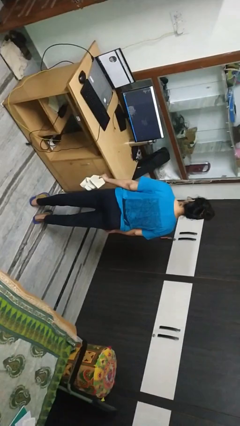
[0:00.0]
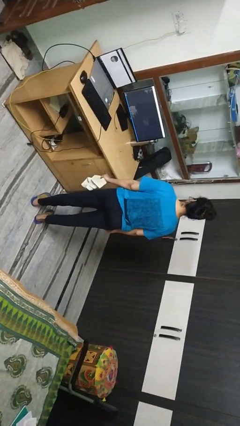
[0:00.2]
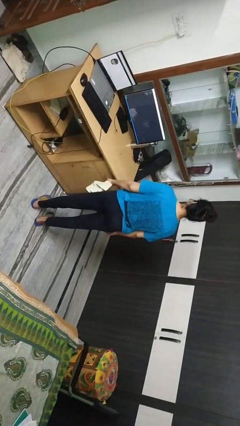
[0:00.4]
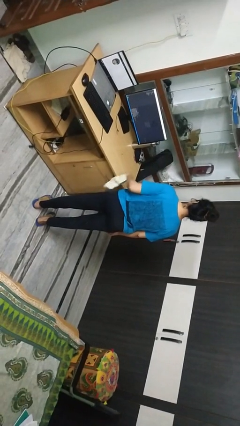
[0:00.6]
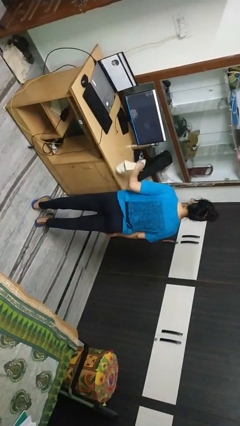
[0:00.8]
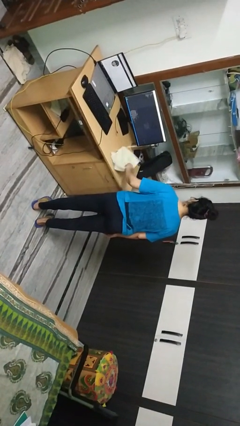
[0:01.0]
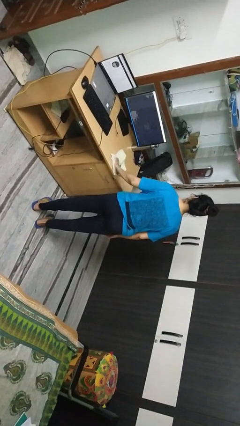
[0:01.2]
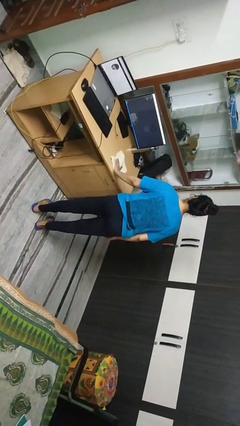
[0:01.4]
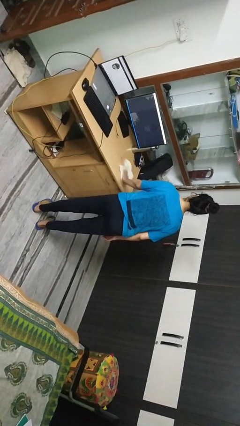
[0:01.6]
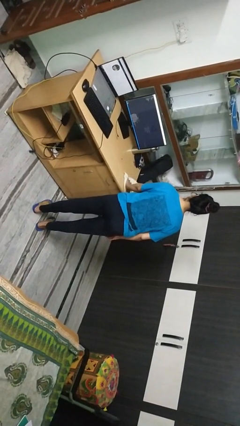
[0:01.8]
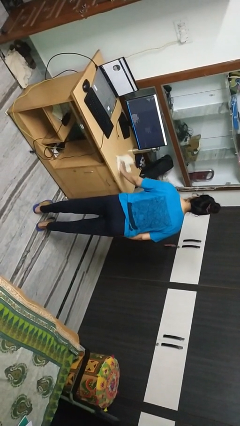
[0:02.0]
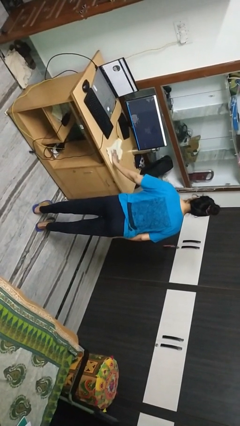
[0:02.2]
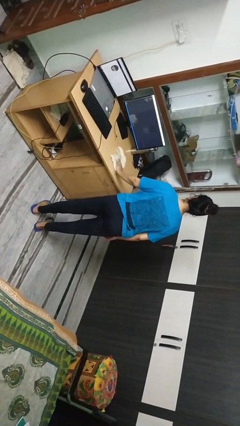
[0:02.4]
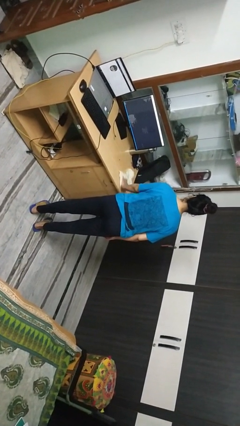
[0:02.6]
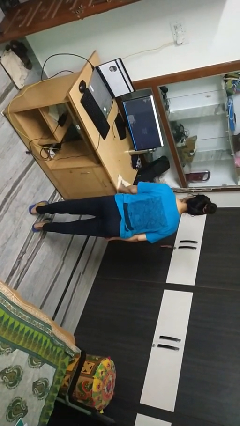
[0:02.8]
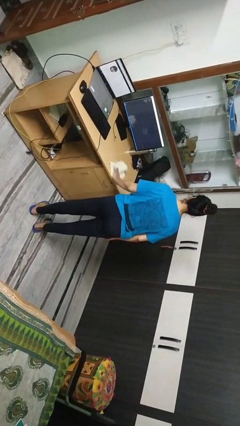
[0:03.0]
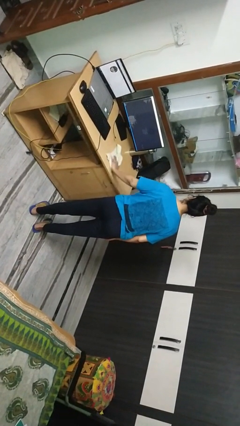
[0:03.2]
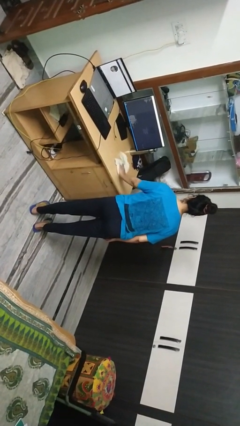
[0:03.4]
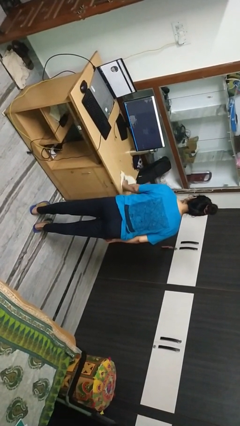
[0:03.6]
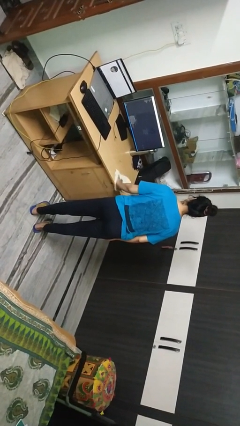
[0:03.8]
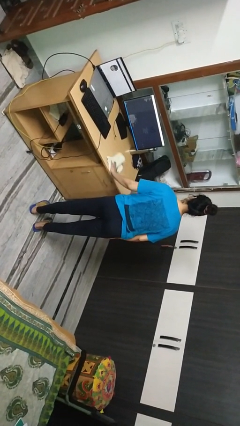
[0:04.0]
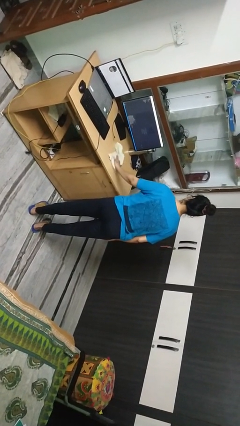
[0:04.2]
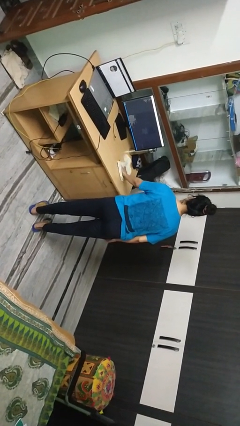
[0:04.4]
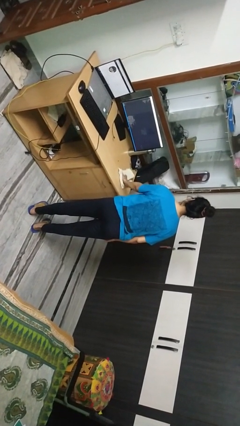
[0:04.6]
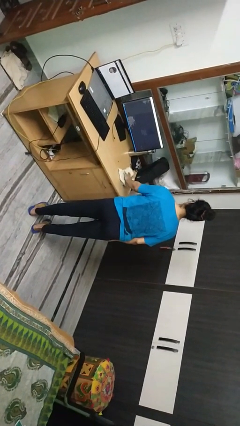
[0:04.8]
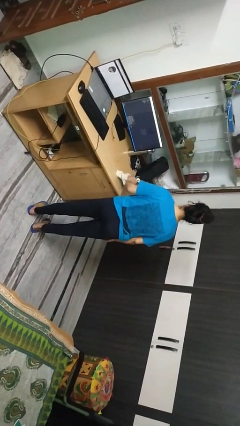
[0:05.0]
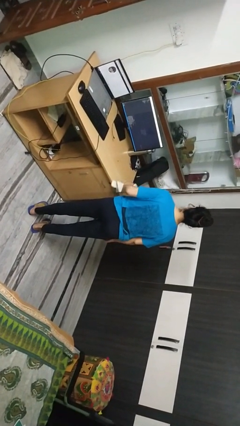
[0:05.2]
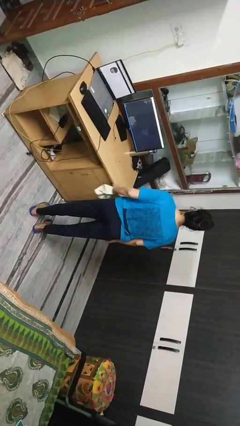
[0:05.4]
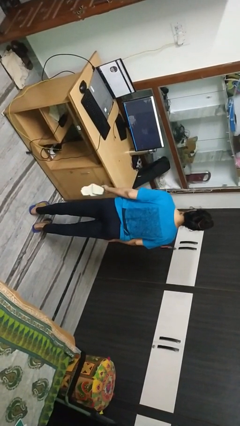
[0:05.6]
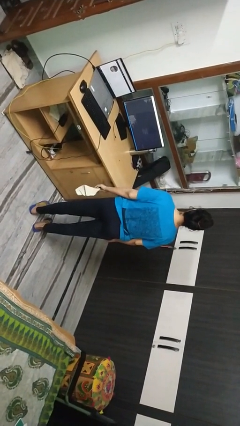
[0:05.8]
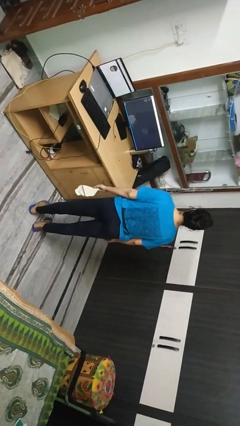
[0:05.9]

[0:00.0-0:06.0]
person cleans table with rag

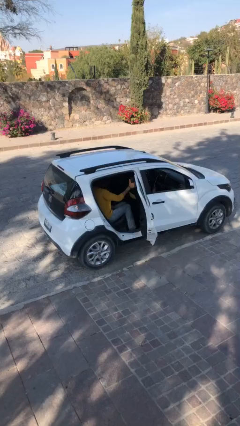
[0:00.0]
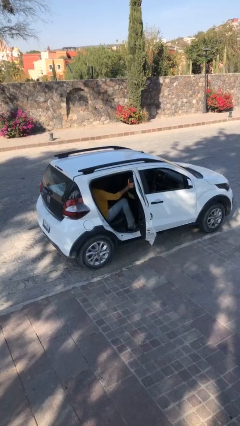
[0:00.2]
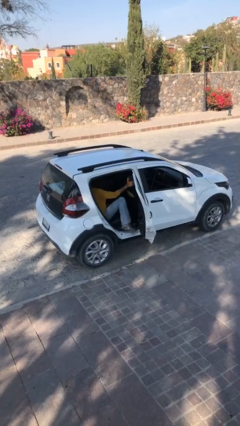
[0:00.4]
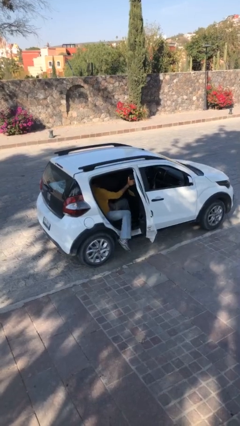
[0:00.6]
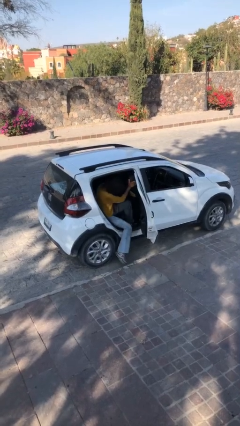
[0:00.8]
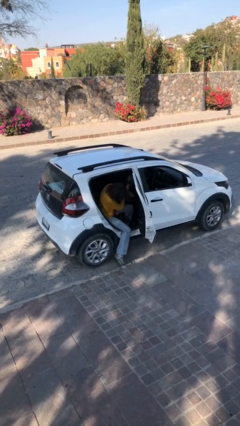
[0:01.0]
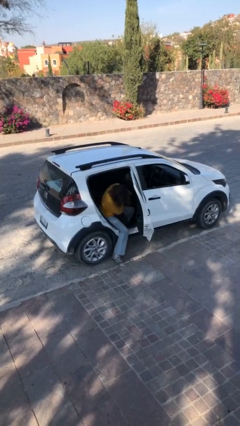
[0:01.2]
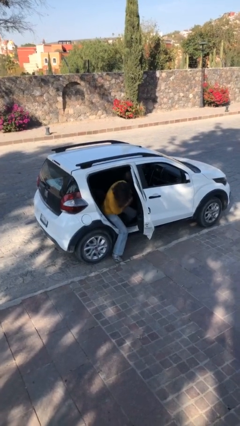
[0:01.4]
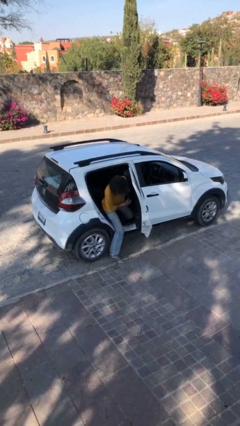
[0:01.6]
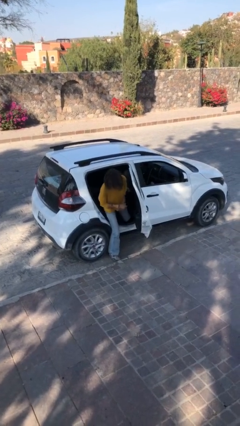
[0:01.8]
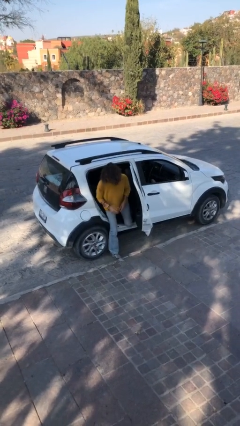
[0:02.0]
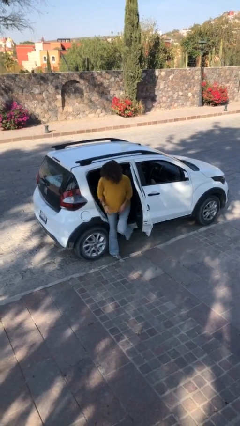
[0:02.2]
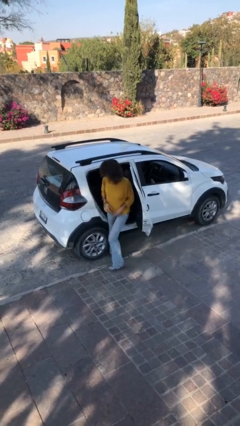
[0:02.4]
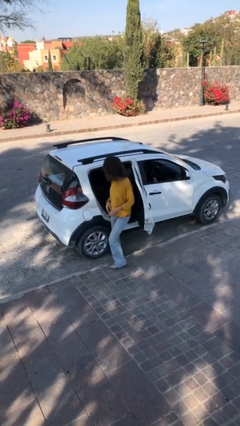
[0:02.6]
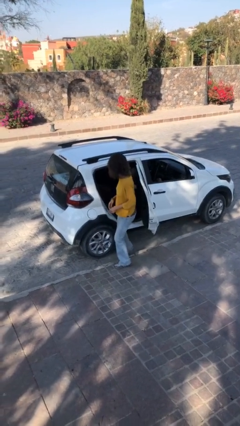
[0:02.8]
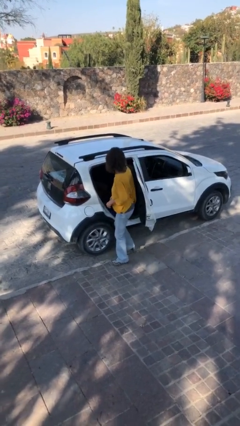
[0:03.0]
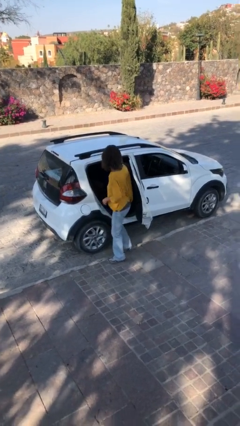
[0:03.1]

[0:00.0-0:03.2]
person exits car

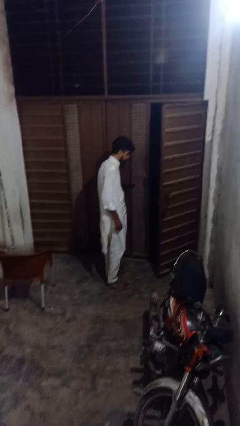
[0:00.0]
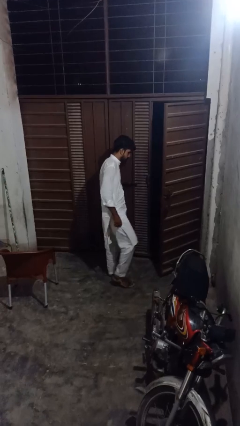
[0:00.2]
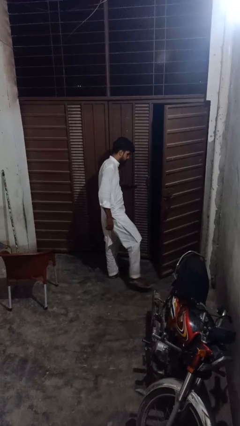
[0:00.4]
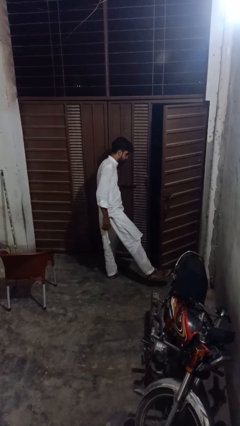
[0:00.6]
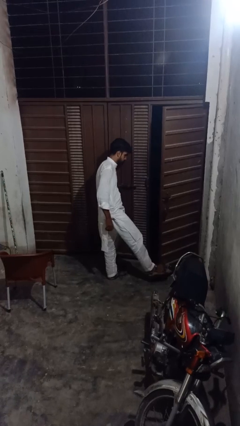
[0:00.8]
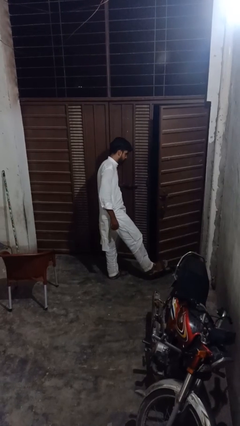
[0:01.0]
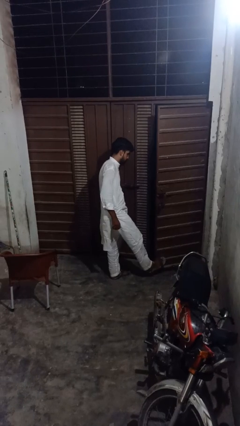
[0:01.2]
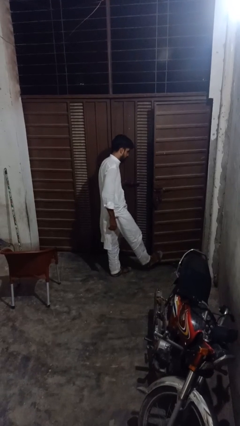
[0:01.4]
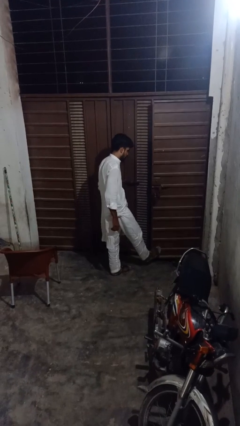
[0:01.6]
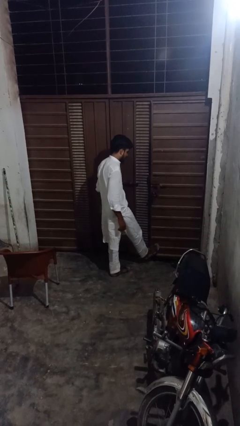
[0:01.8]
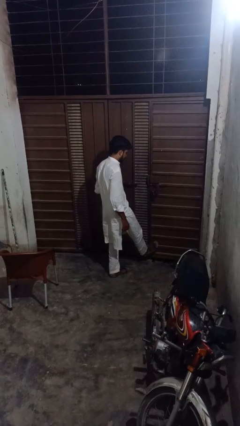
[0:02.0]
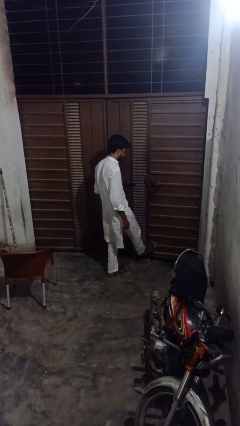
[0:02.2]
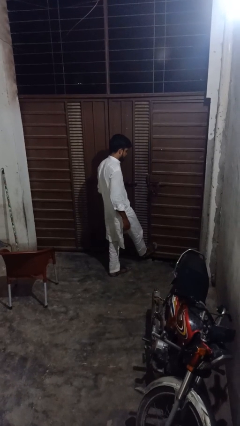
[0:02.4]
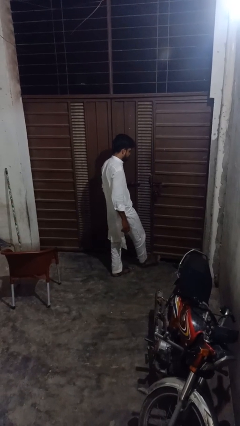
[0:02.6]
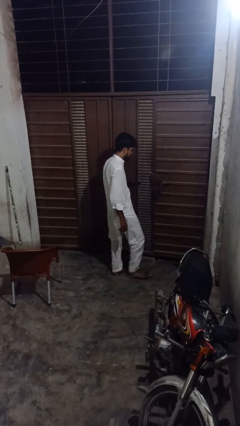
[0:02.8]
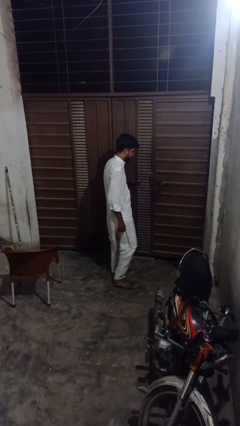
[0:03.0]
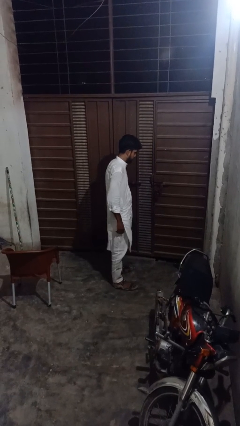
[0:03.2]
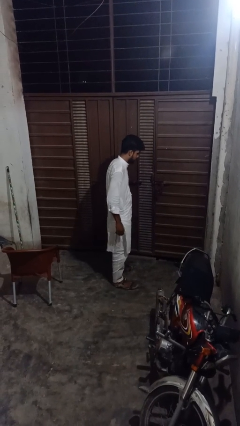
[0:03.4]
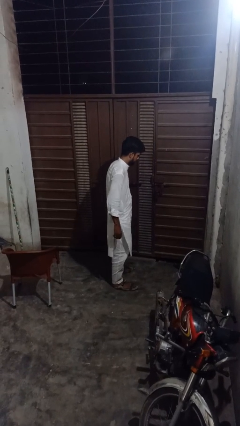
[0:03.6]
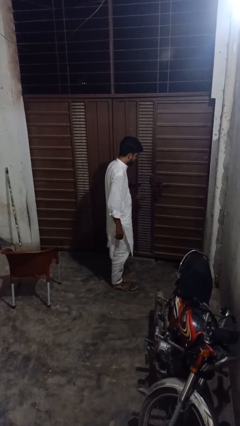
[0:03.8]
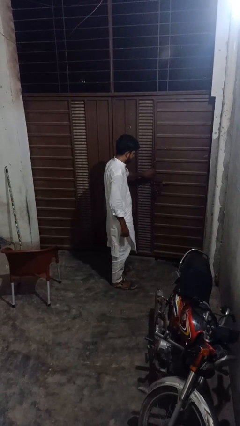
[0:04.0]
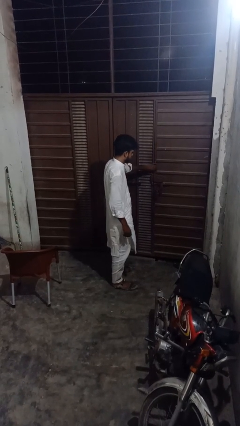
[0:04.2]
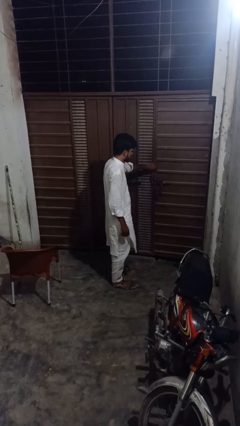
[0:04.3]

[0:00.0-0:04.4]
person closes door with foot

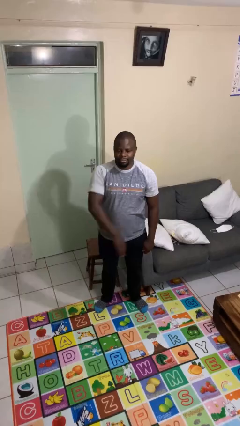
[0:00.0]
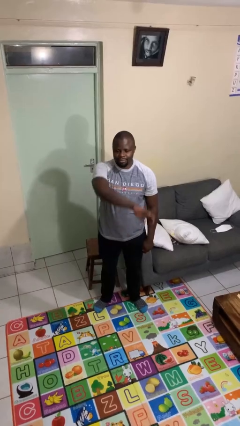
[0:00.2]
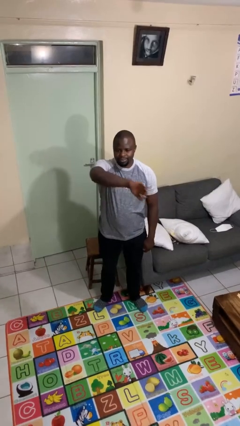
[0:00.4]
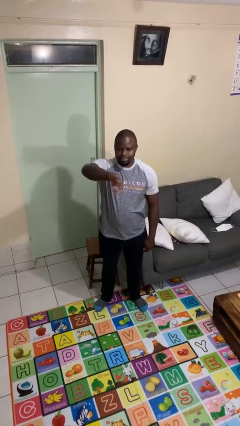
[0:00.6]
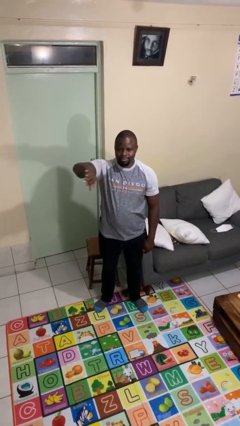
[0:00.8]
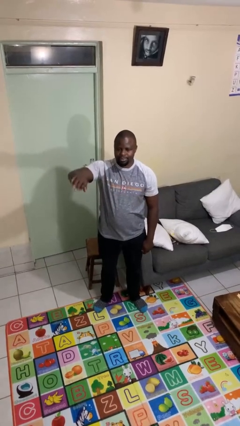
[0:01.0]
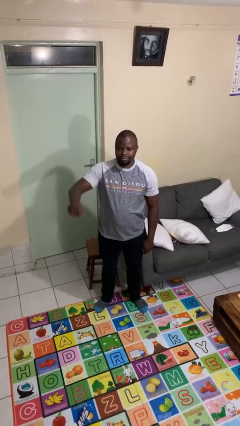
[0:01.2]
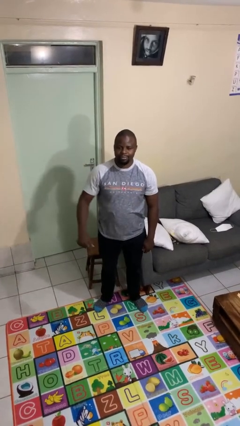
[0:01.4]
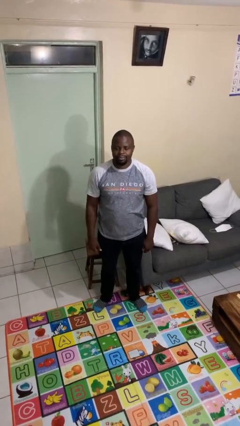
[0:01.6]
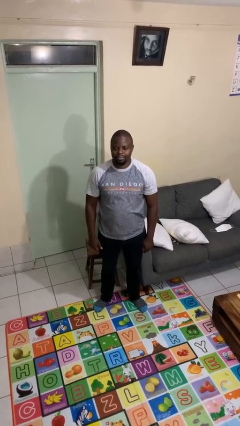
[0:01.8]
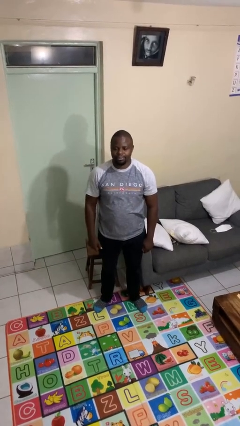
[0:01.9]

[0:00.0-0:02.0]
person gestures swipe right

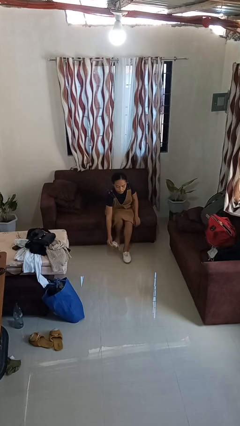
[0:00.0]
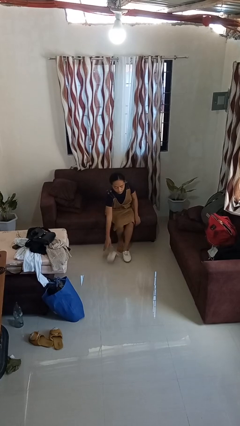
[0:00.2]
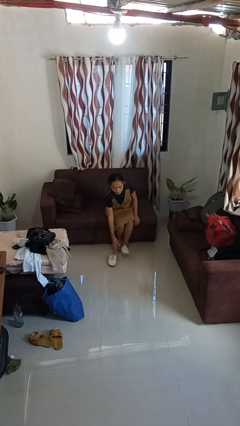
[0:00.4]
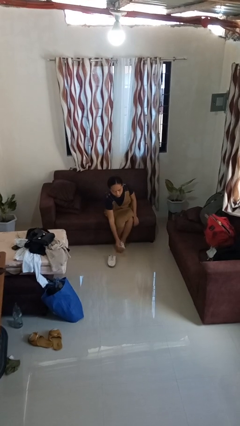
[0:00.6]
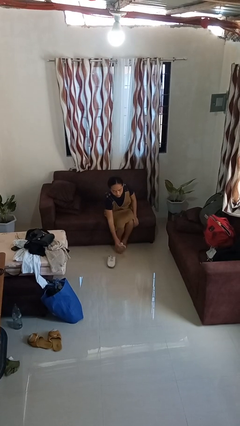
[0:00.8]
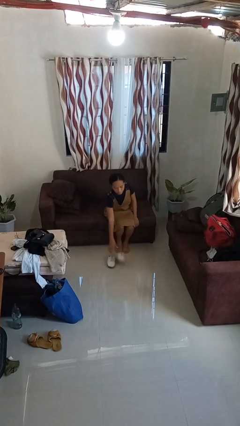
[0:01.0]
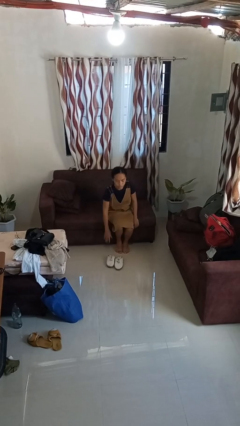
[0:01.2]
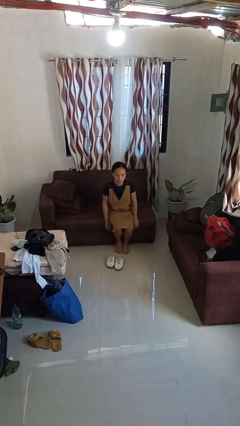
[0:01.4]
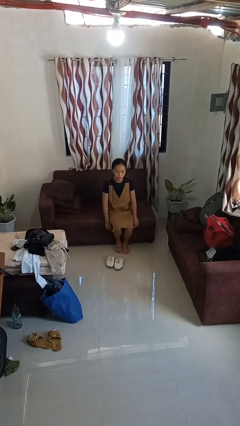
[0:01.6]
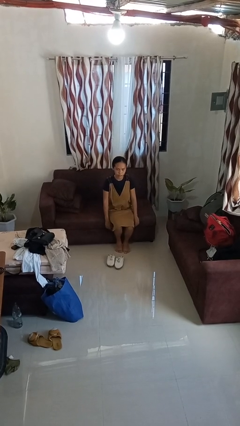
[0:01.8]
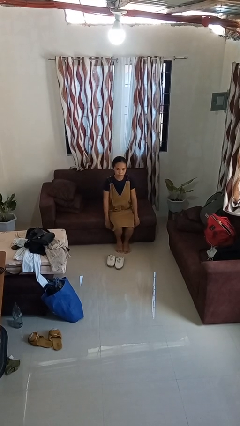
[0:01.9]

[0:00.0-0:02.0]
person takes off shoes

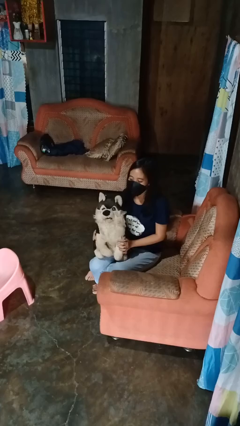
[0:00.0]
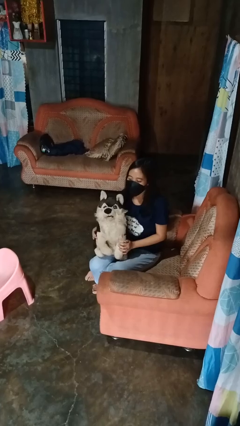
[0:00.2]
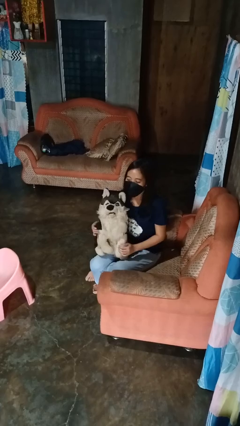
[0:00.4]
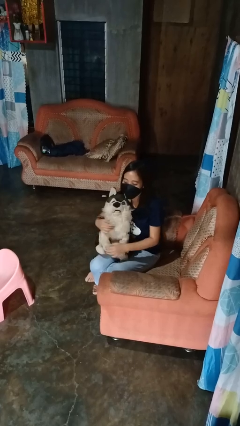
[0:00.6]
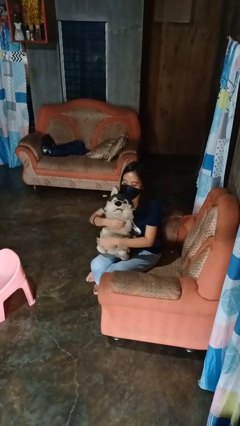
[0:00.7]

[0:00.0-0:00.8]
person hugs stuffed animal
